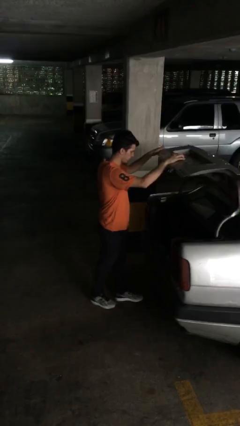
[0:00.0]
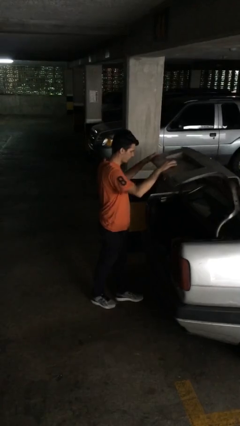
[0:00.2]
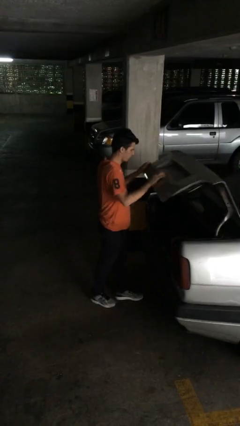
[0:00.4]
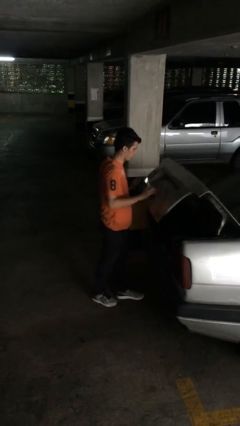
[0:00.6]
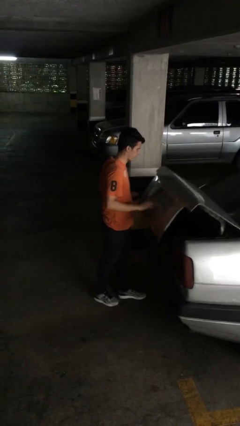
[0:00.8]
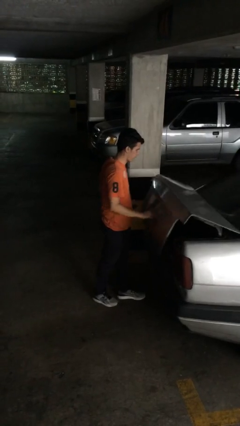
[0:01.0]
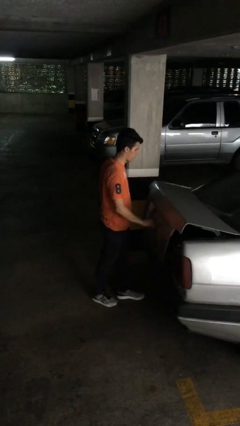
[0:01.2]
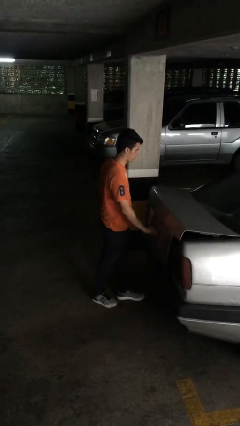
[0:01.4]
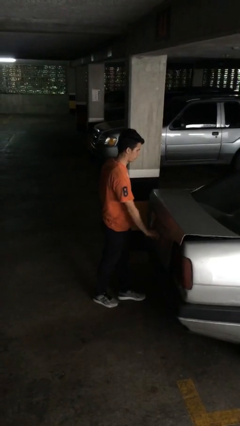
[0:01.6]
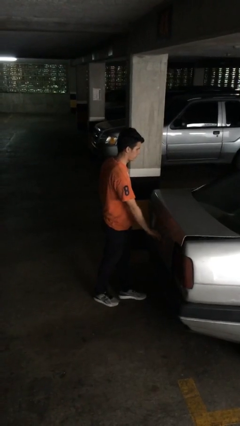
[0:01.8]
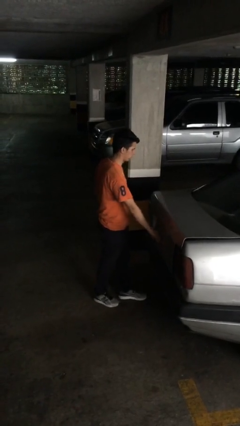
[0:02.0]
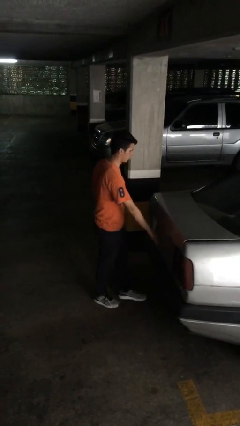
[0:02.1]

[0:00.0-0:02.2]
person closes car trunk

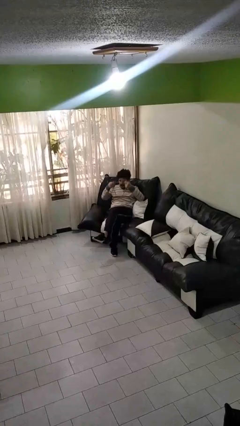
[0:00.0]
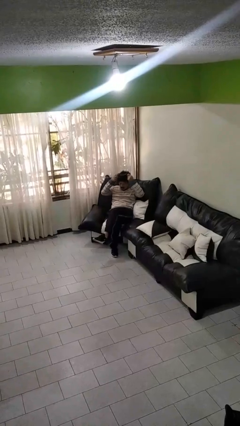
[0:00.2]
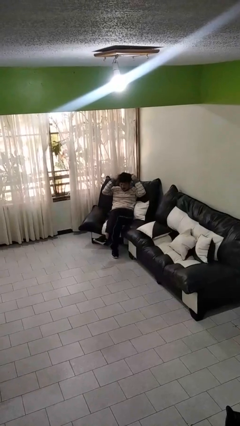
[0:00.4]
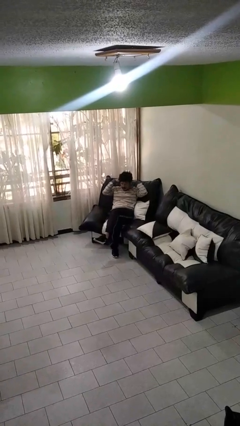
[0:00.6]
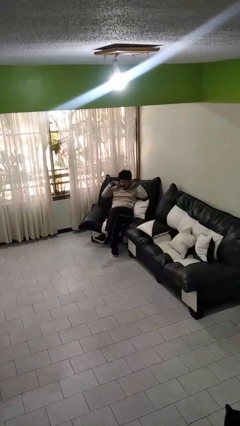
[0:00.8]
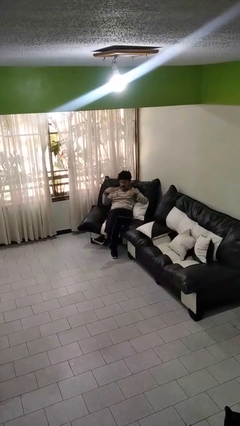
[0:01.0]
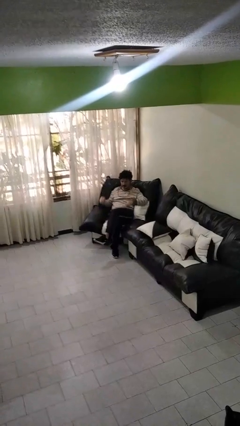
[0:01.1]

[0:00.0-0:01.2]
person puts on necklace

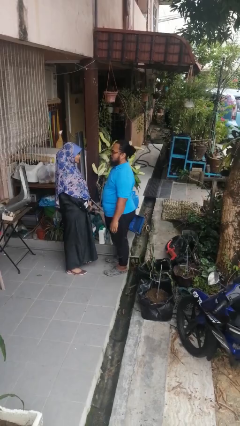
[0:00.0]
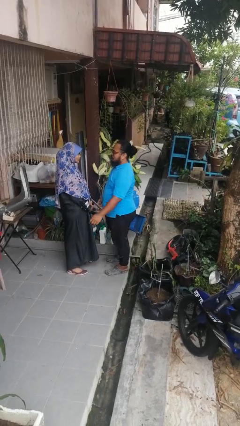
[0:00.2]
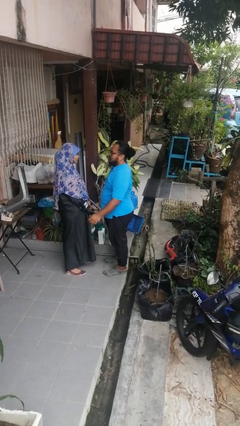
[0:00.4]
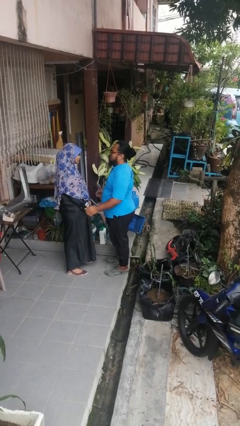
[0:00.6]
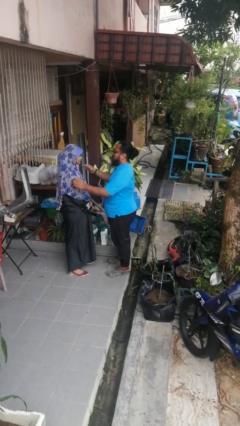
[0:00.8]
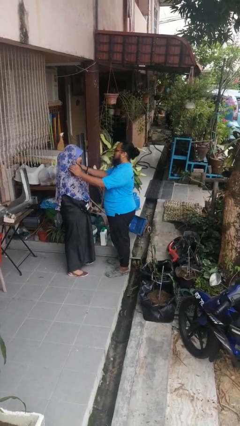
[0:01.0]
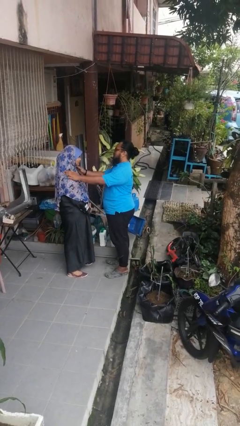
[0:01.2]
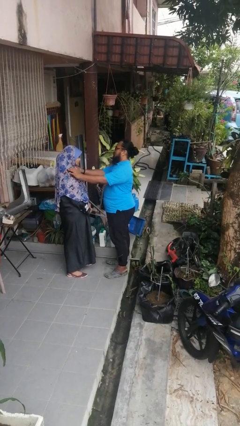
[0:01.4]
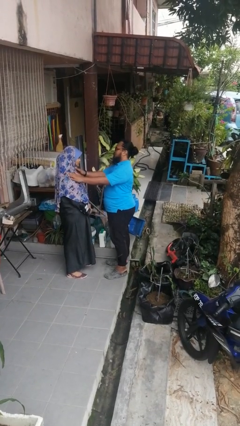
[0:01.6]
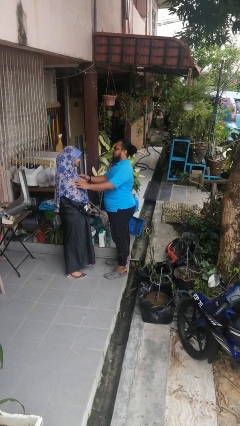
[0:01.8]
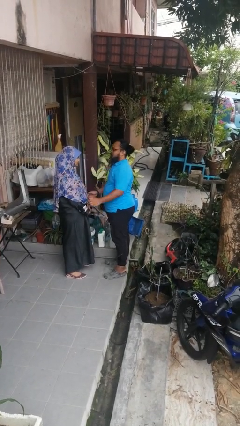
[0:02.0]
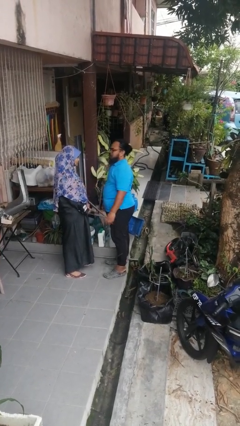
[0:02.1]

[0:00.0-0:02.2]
person pounds shoulders of person

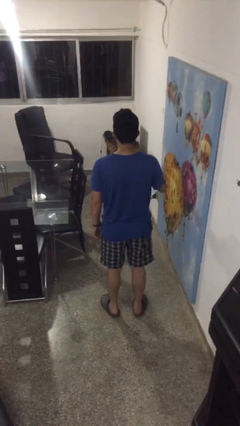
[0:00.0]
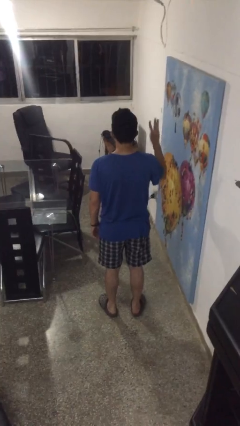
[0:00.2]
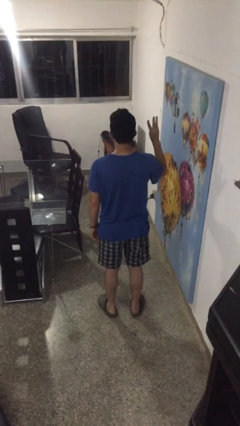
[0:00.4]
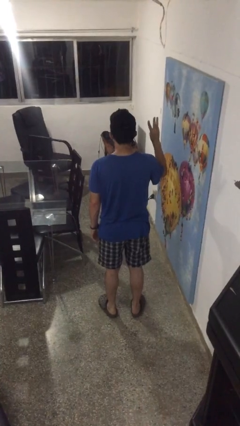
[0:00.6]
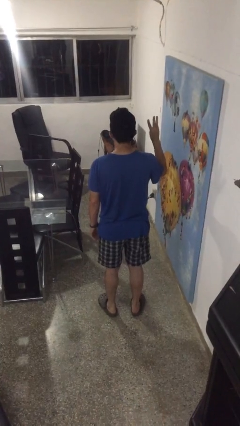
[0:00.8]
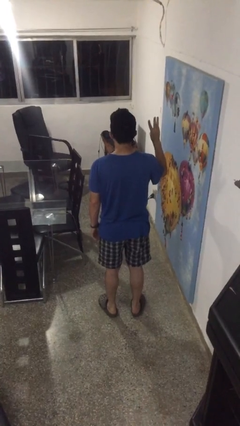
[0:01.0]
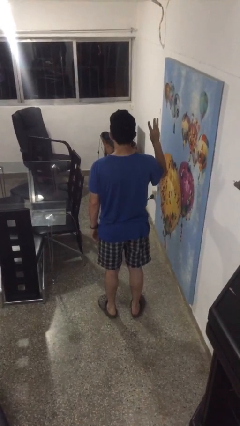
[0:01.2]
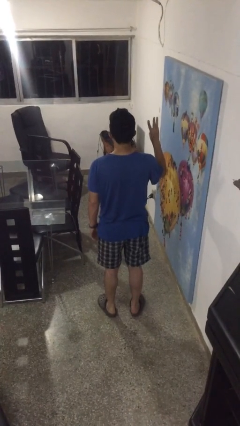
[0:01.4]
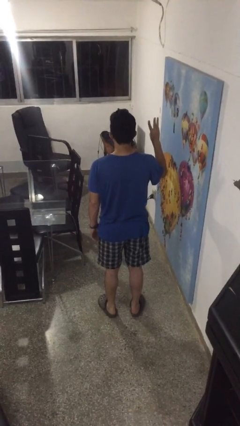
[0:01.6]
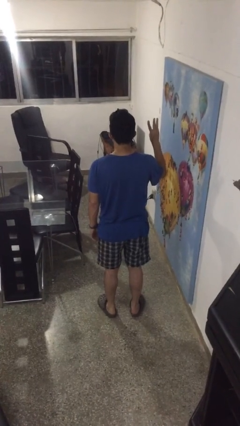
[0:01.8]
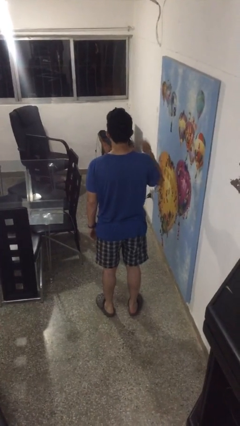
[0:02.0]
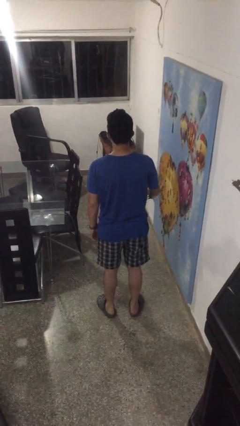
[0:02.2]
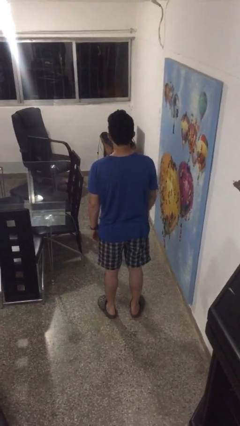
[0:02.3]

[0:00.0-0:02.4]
person gestures number three

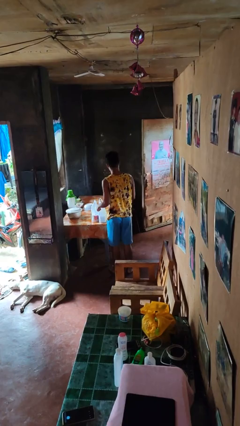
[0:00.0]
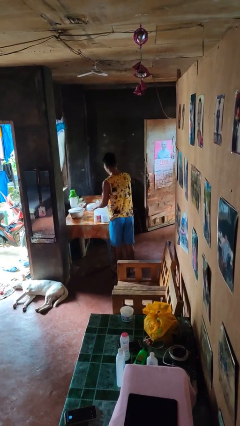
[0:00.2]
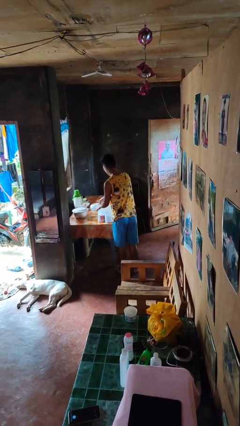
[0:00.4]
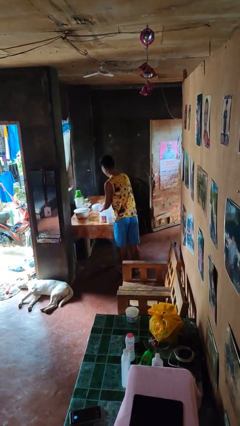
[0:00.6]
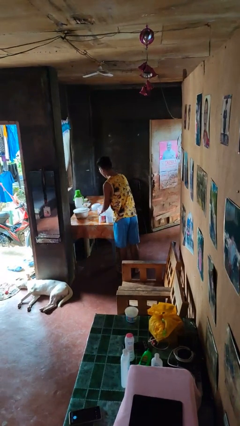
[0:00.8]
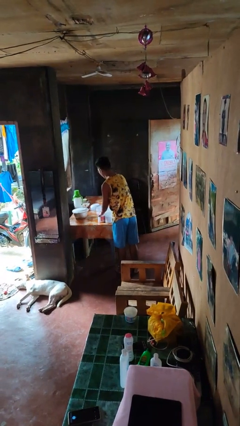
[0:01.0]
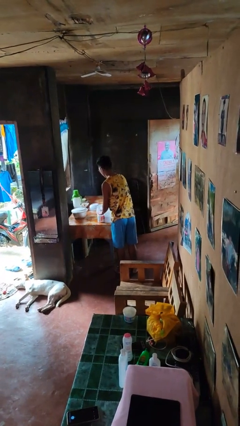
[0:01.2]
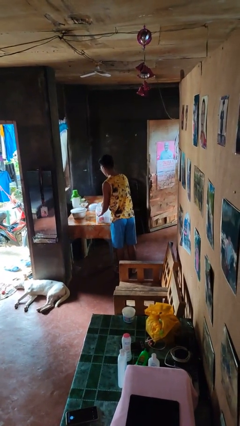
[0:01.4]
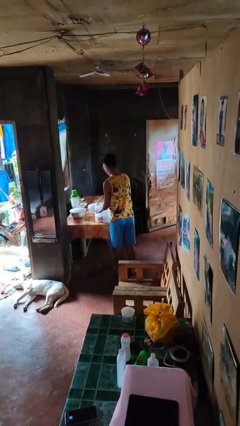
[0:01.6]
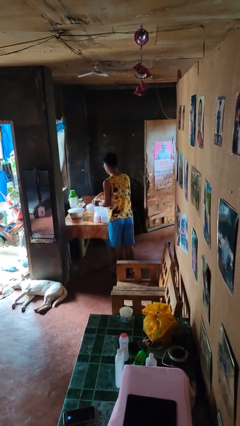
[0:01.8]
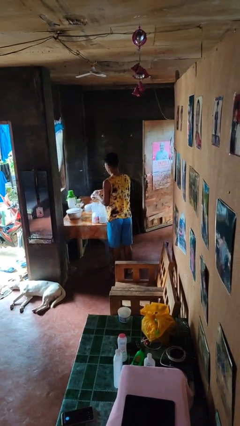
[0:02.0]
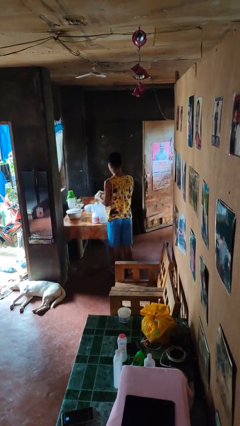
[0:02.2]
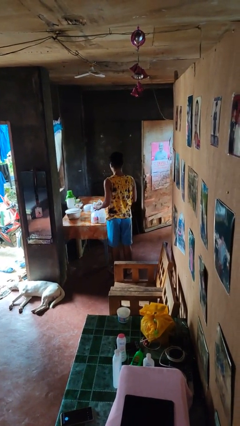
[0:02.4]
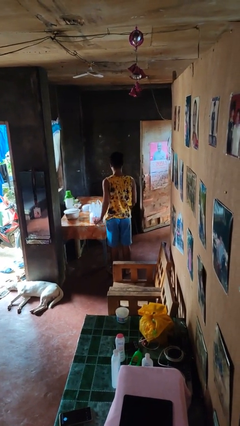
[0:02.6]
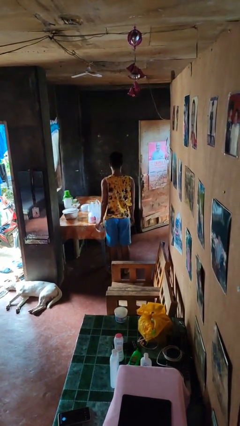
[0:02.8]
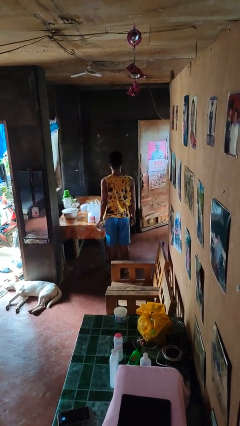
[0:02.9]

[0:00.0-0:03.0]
person takes object from bag

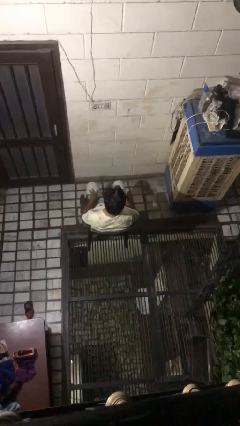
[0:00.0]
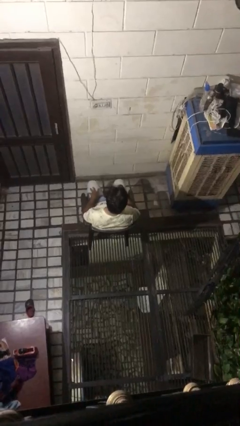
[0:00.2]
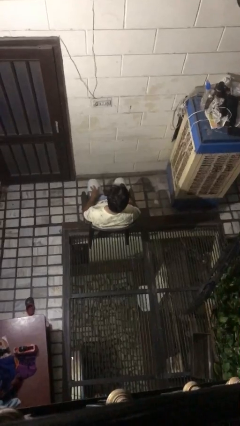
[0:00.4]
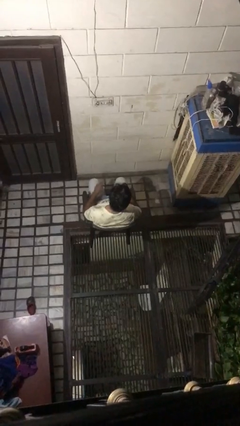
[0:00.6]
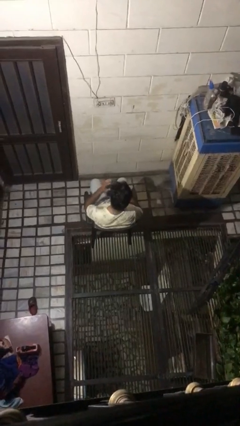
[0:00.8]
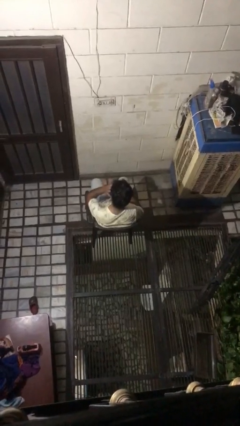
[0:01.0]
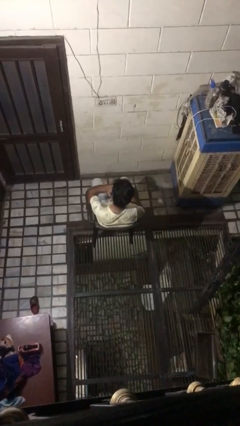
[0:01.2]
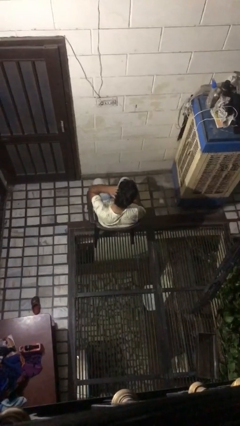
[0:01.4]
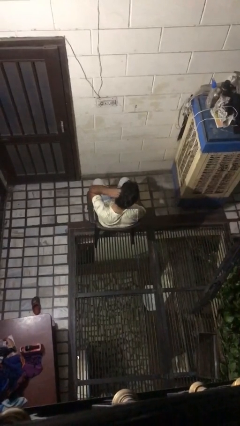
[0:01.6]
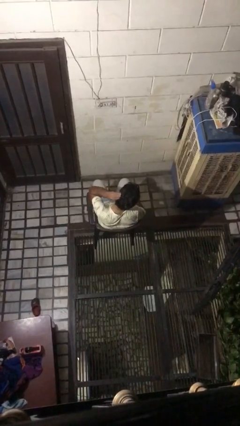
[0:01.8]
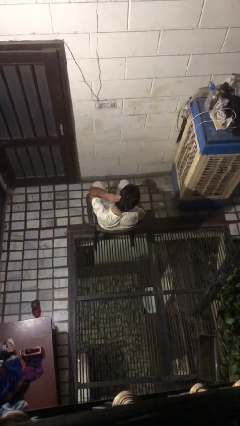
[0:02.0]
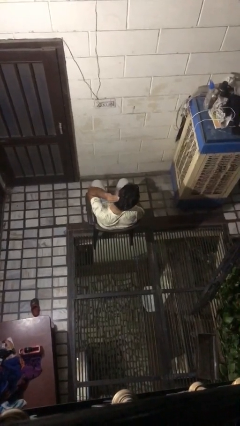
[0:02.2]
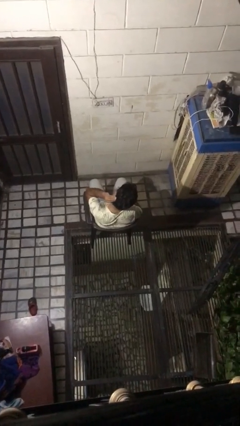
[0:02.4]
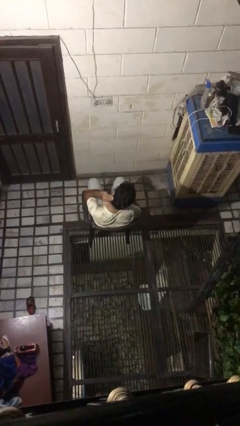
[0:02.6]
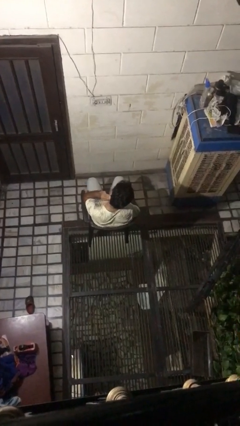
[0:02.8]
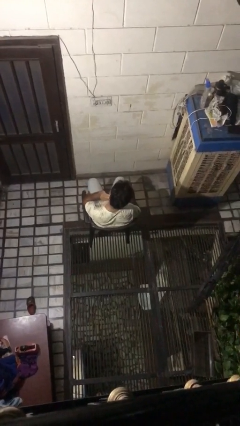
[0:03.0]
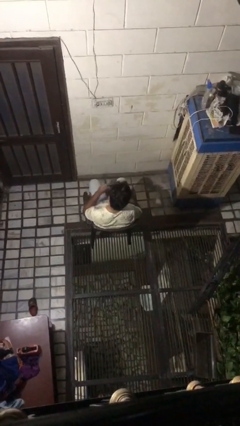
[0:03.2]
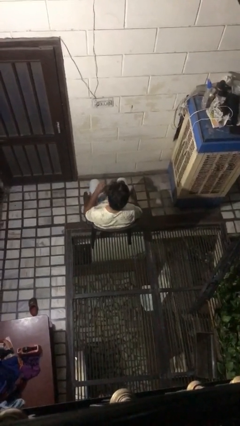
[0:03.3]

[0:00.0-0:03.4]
person strokes hair

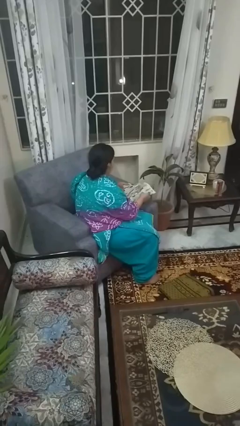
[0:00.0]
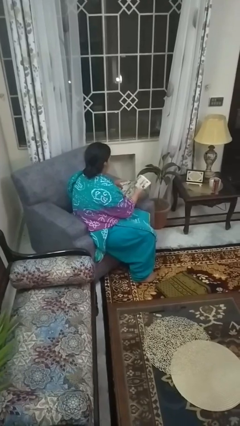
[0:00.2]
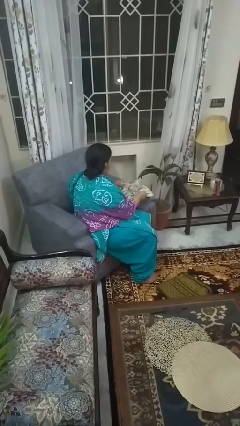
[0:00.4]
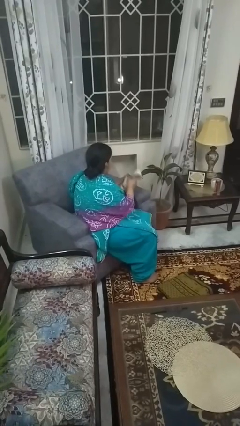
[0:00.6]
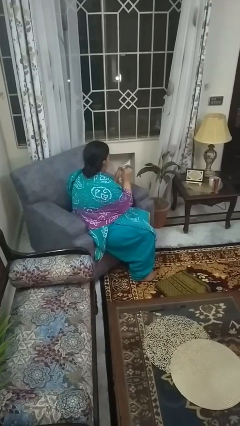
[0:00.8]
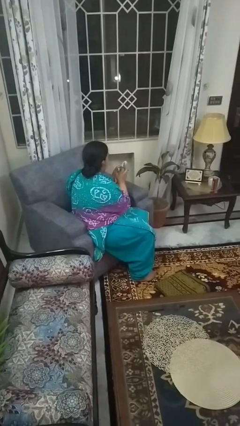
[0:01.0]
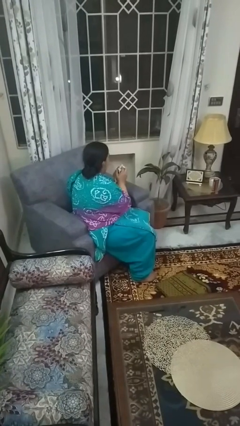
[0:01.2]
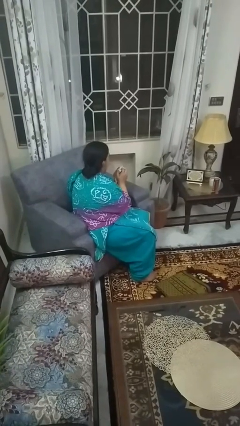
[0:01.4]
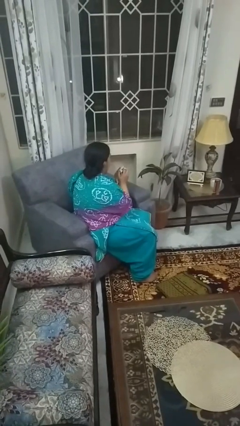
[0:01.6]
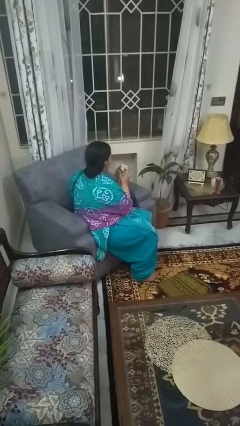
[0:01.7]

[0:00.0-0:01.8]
person crumples paper

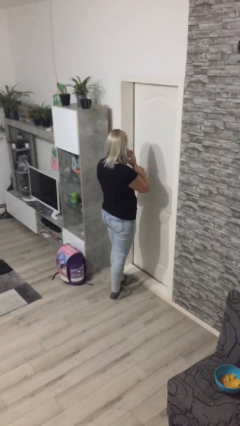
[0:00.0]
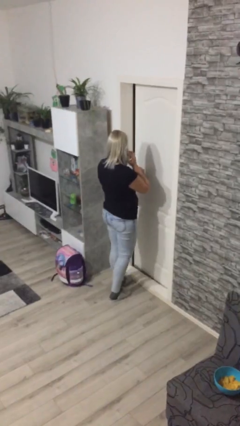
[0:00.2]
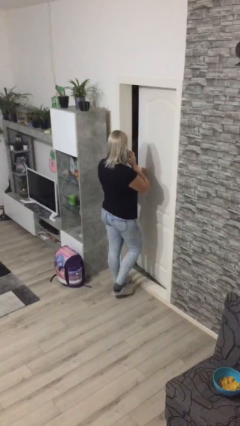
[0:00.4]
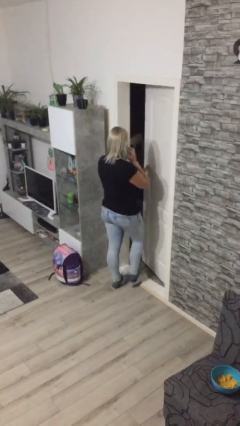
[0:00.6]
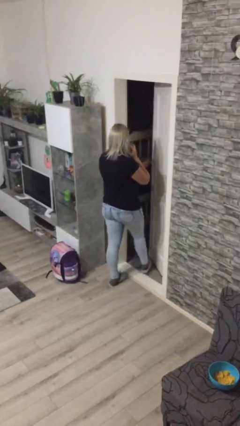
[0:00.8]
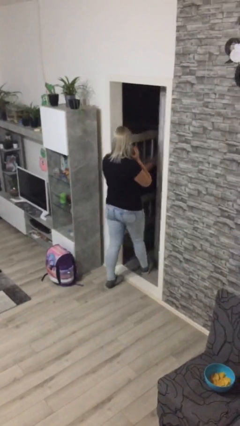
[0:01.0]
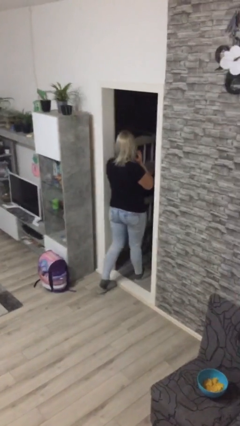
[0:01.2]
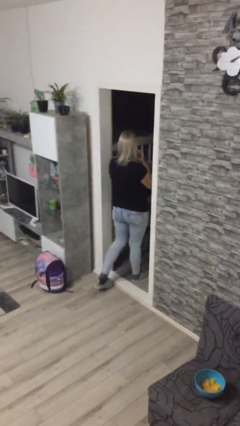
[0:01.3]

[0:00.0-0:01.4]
person opens facility door
